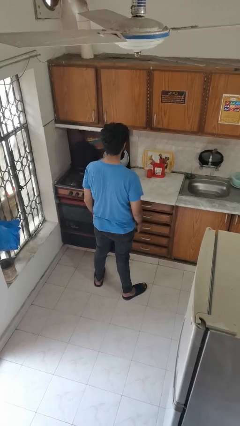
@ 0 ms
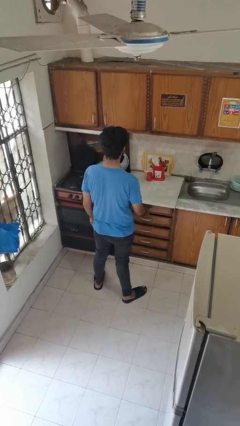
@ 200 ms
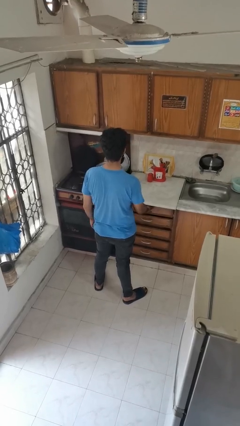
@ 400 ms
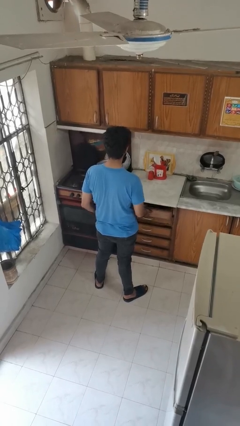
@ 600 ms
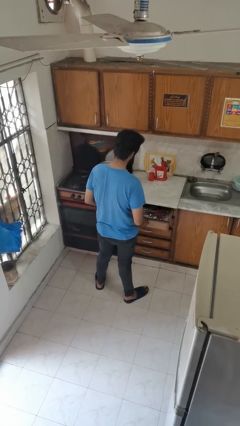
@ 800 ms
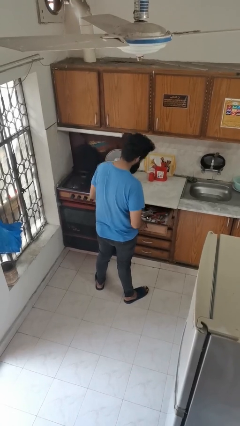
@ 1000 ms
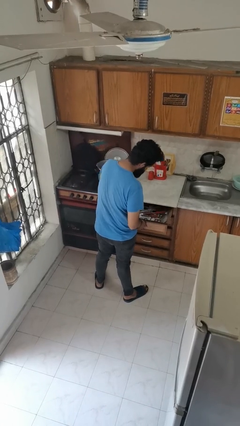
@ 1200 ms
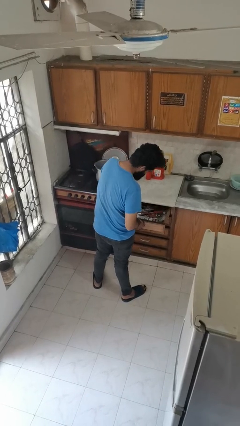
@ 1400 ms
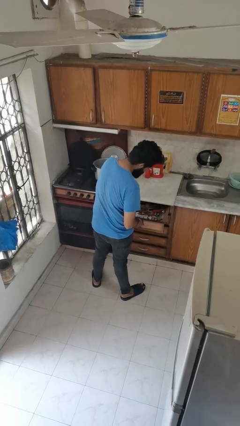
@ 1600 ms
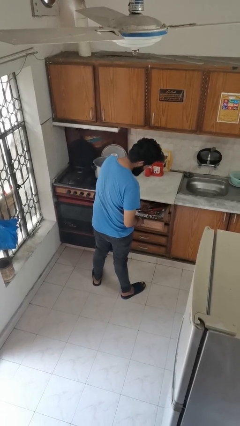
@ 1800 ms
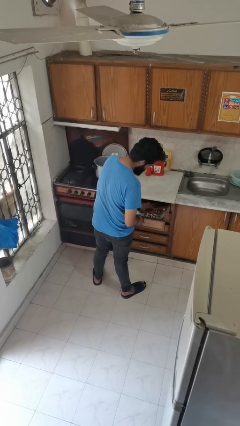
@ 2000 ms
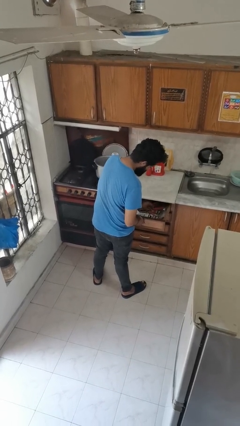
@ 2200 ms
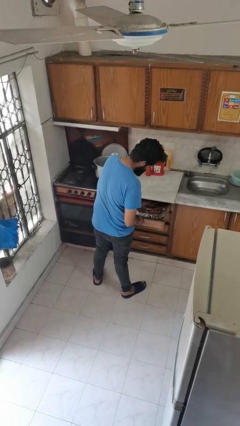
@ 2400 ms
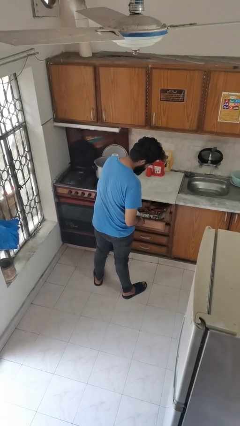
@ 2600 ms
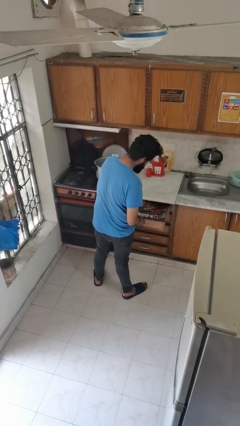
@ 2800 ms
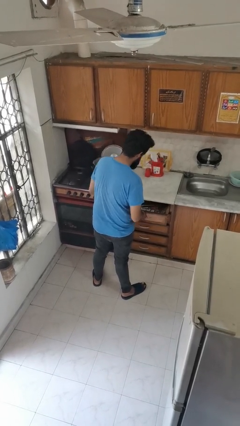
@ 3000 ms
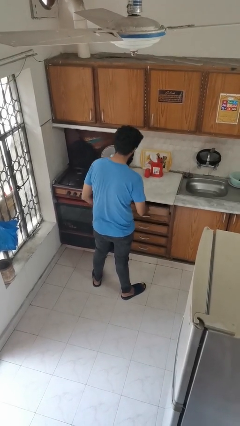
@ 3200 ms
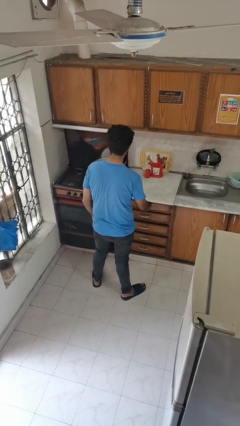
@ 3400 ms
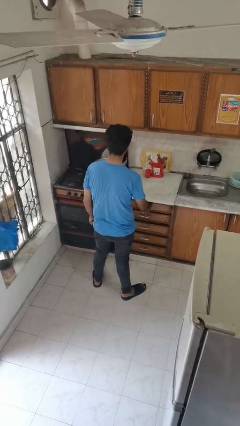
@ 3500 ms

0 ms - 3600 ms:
person searches in kitchen drawer

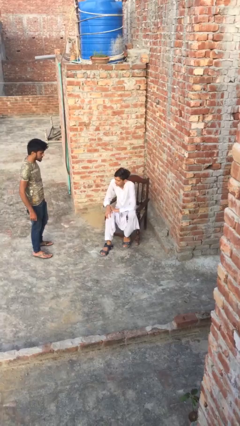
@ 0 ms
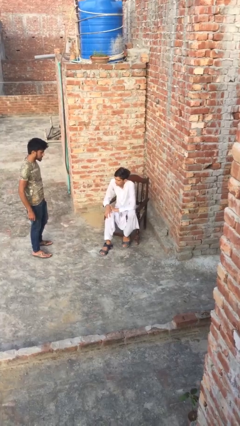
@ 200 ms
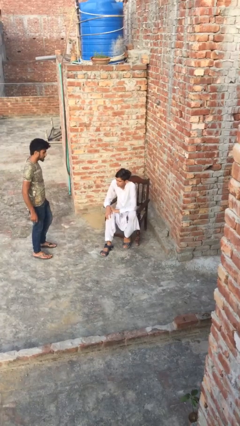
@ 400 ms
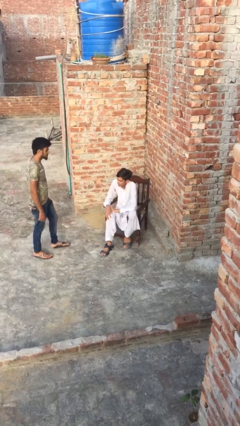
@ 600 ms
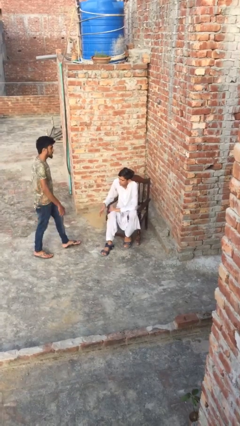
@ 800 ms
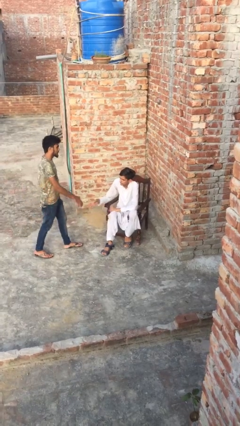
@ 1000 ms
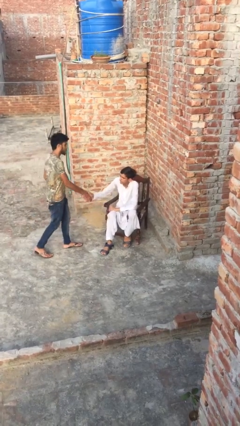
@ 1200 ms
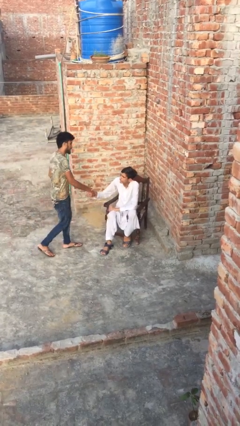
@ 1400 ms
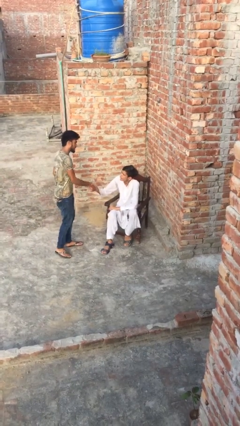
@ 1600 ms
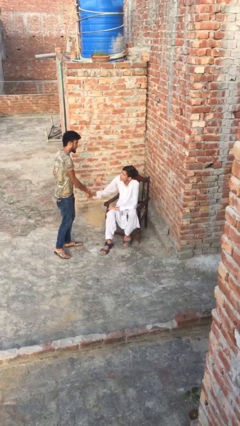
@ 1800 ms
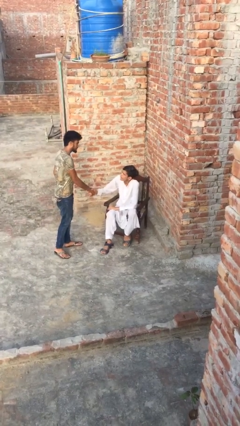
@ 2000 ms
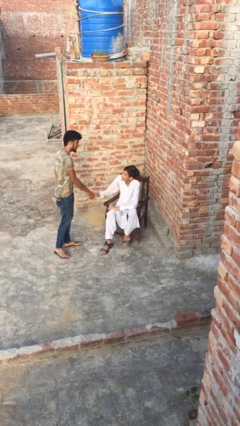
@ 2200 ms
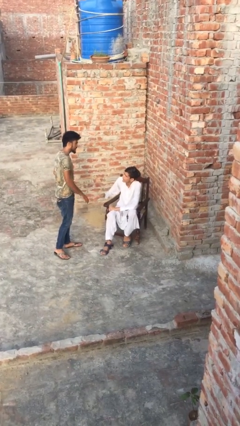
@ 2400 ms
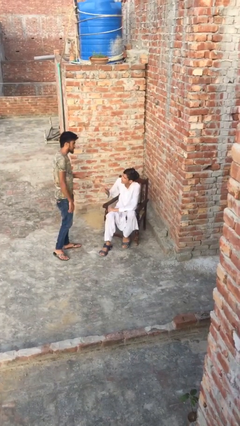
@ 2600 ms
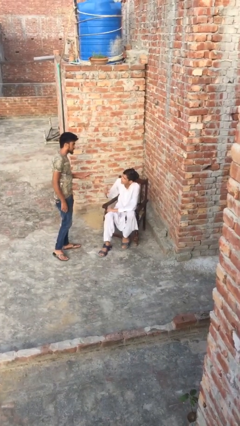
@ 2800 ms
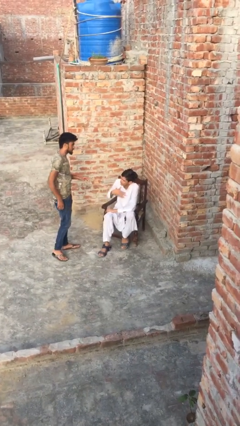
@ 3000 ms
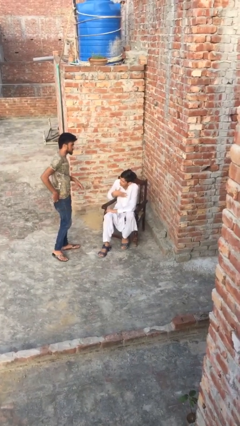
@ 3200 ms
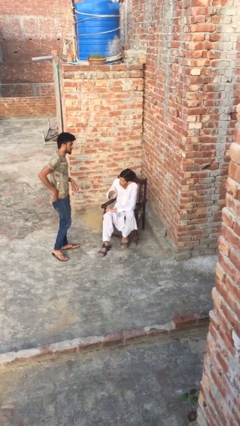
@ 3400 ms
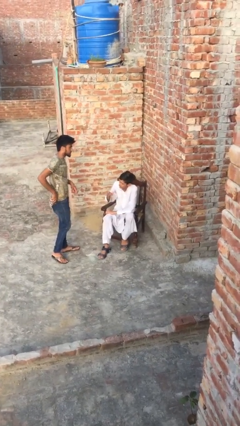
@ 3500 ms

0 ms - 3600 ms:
person shakes hand

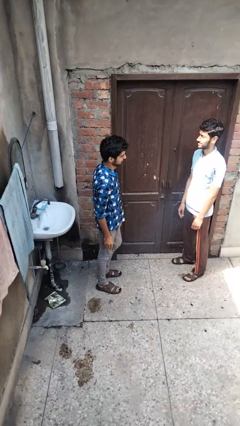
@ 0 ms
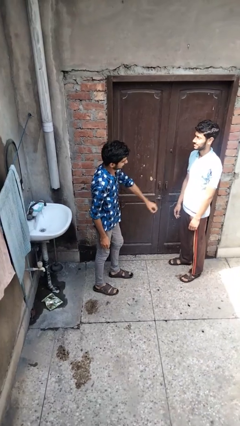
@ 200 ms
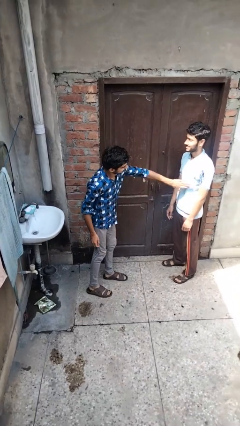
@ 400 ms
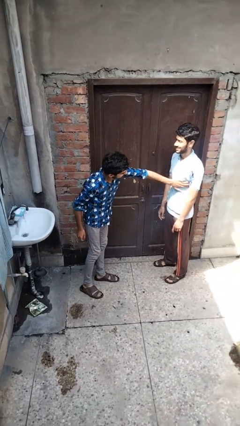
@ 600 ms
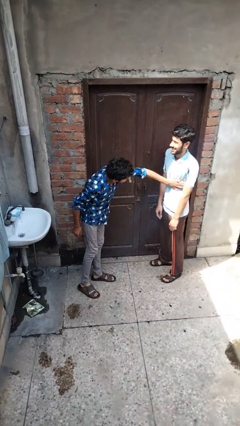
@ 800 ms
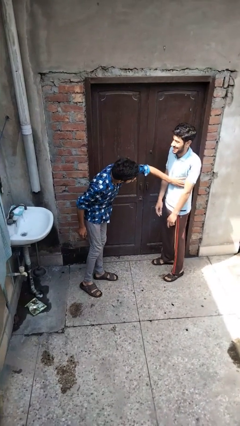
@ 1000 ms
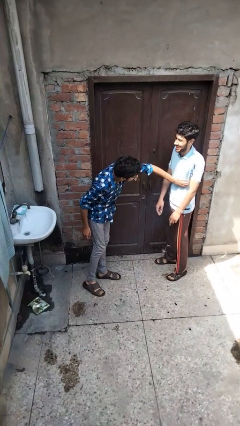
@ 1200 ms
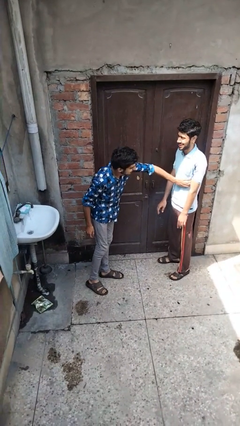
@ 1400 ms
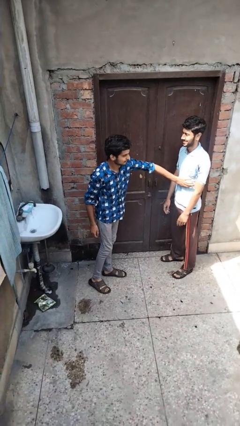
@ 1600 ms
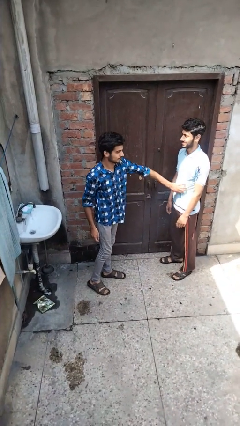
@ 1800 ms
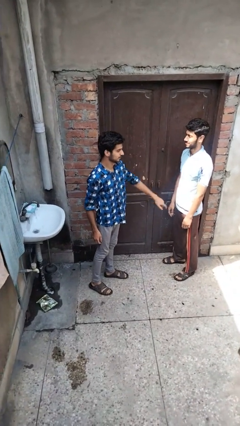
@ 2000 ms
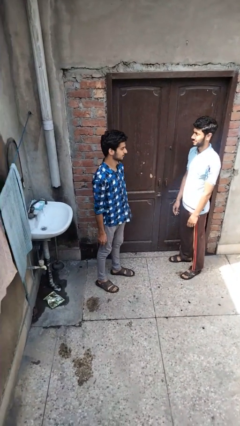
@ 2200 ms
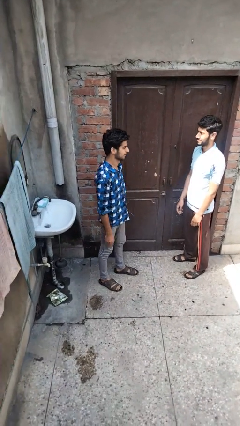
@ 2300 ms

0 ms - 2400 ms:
person tickles person

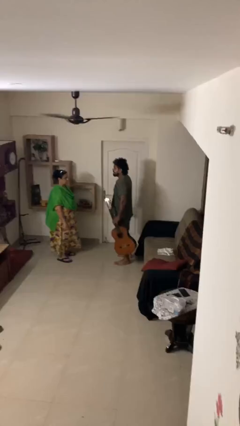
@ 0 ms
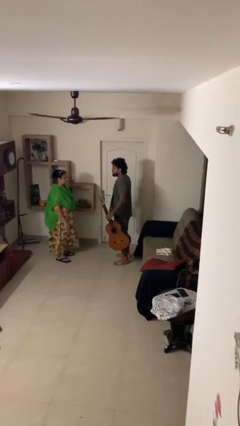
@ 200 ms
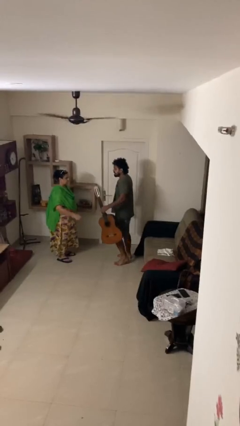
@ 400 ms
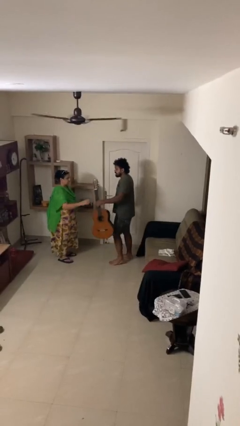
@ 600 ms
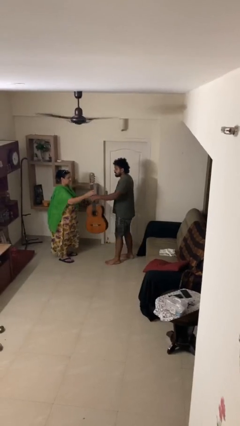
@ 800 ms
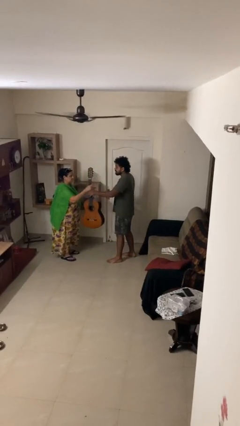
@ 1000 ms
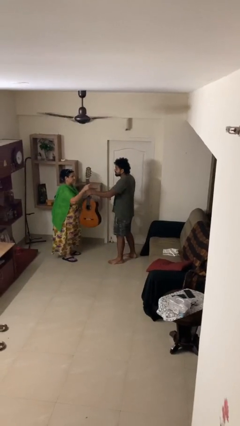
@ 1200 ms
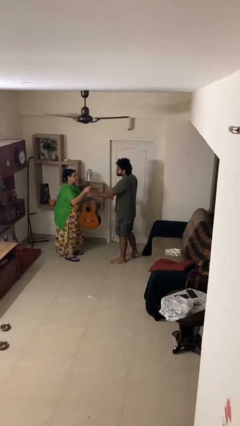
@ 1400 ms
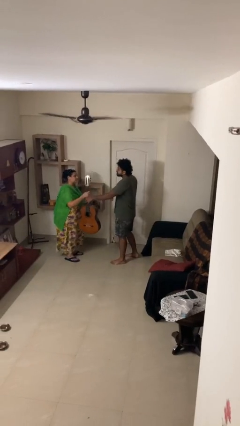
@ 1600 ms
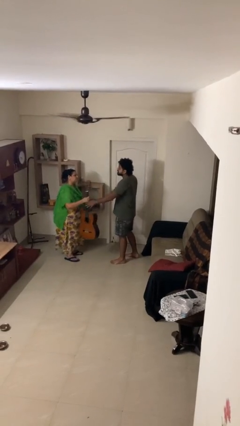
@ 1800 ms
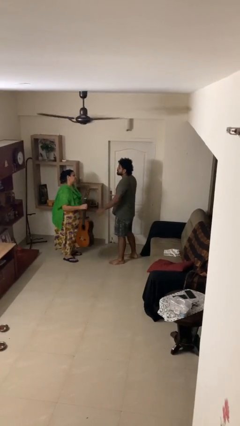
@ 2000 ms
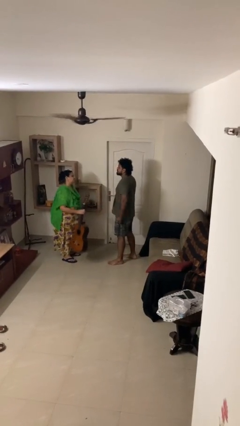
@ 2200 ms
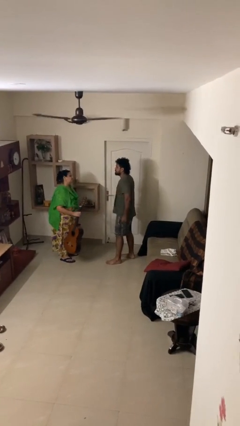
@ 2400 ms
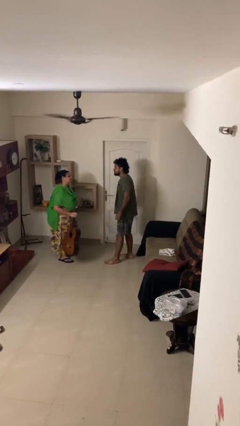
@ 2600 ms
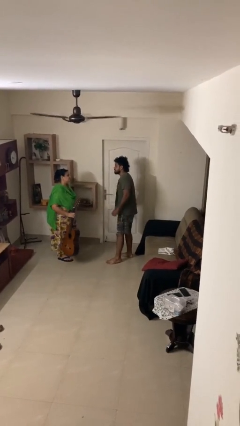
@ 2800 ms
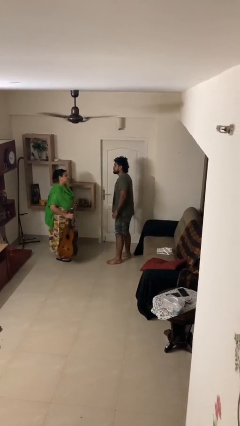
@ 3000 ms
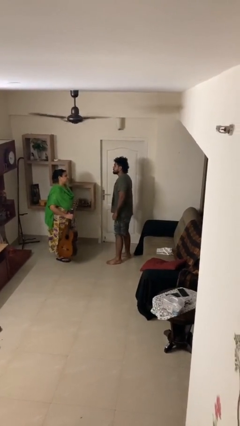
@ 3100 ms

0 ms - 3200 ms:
person transfers object to person

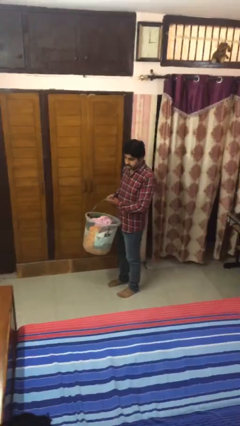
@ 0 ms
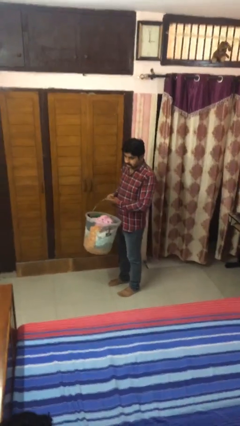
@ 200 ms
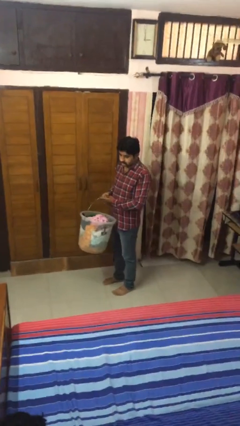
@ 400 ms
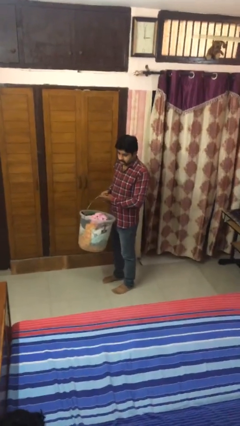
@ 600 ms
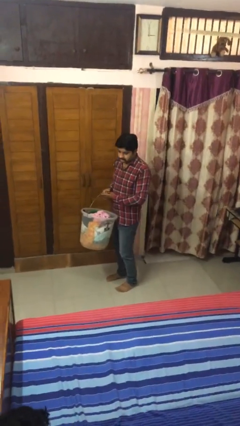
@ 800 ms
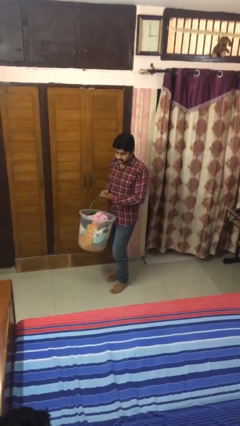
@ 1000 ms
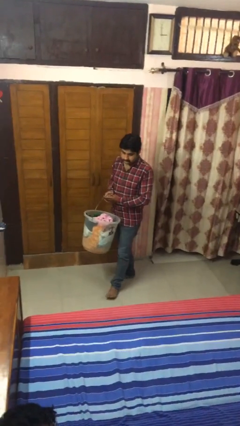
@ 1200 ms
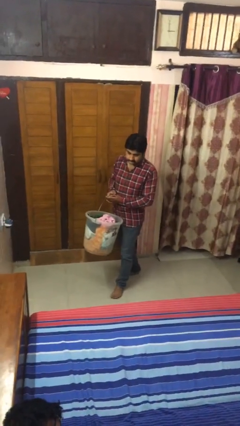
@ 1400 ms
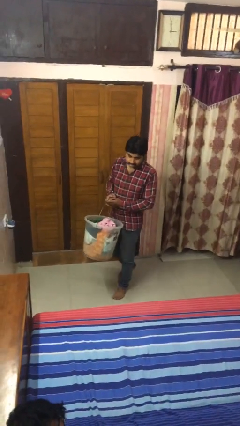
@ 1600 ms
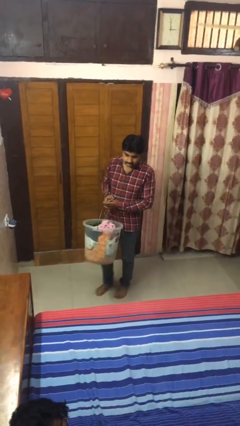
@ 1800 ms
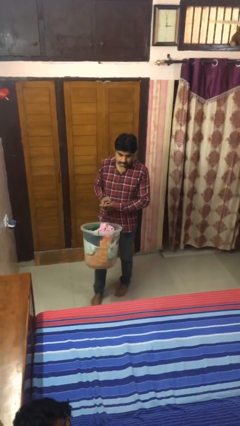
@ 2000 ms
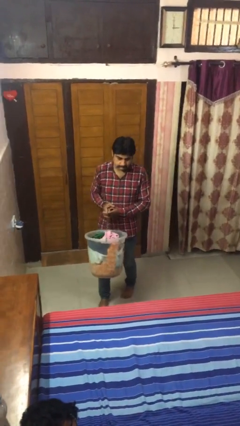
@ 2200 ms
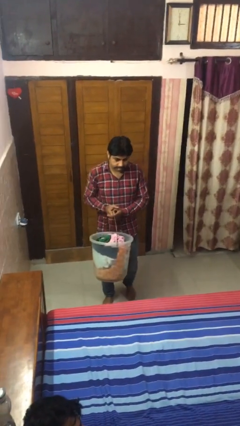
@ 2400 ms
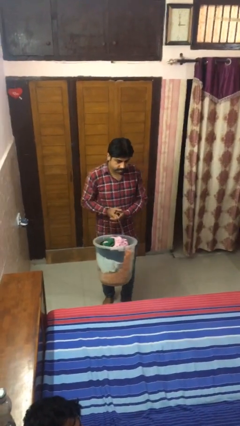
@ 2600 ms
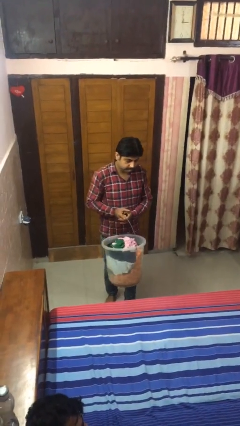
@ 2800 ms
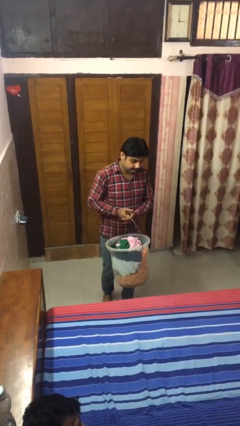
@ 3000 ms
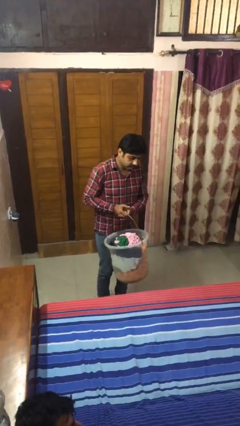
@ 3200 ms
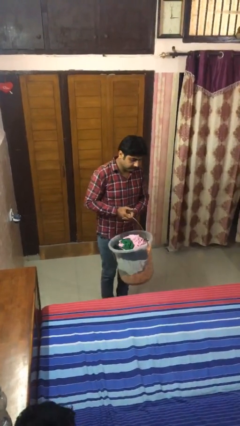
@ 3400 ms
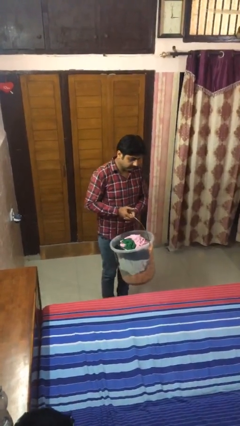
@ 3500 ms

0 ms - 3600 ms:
person carries laundry basket

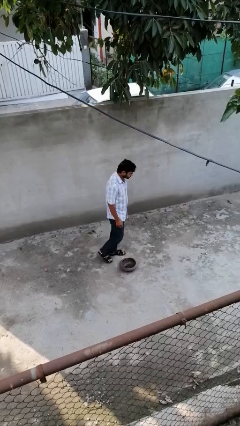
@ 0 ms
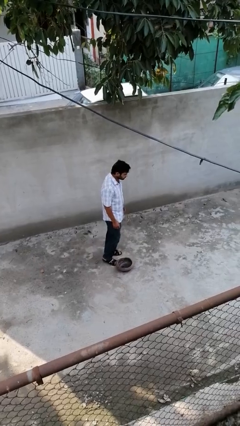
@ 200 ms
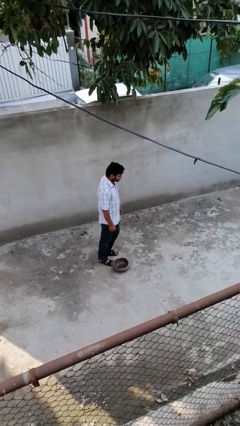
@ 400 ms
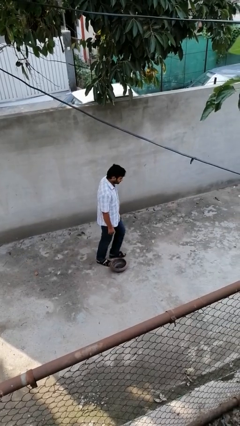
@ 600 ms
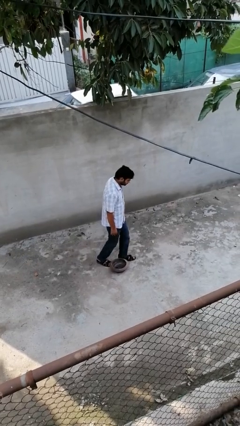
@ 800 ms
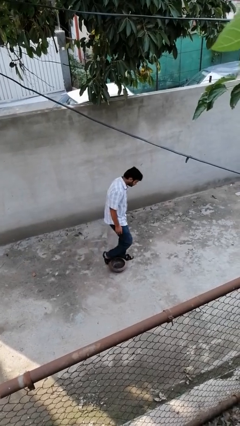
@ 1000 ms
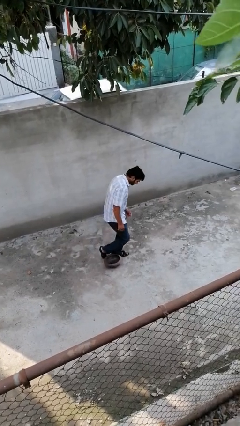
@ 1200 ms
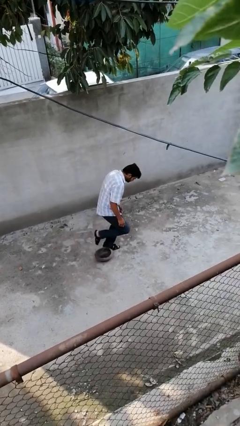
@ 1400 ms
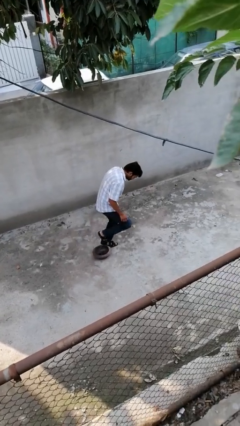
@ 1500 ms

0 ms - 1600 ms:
person trips on object on floor
